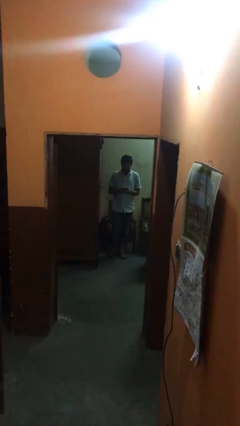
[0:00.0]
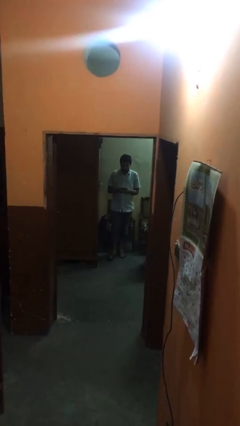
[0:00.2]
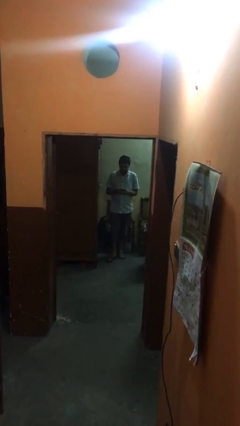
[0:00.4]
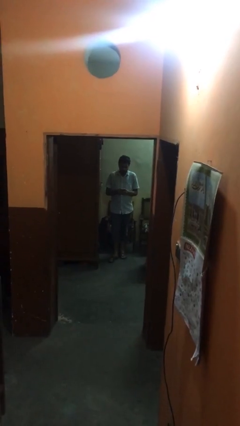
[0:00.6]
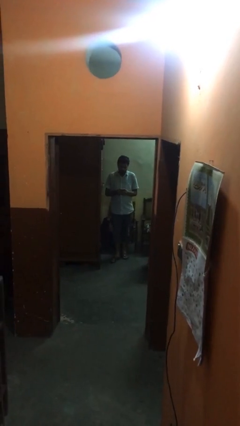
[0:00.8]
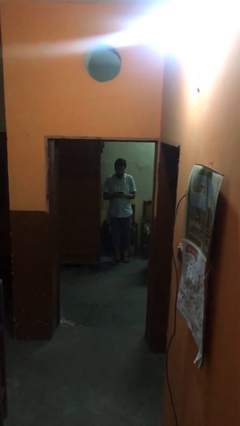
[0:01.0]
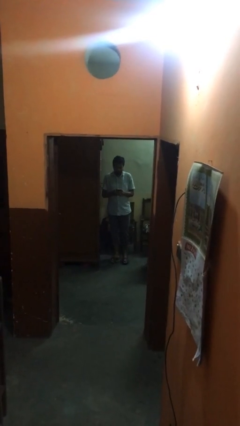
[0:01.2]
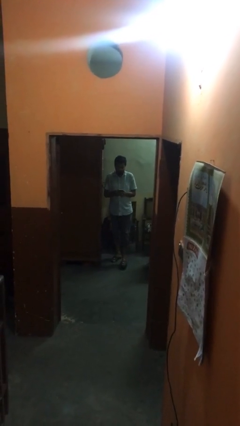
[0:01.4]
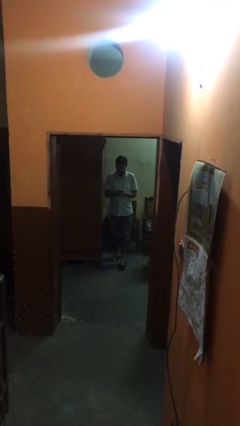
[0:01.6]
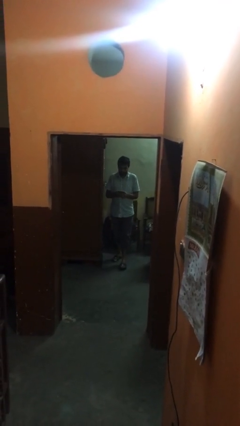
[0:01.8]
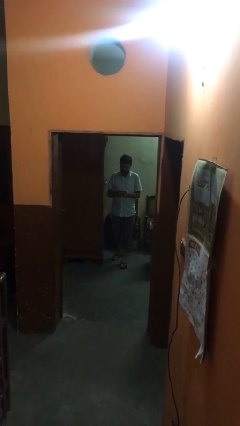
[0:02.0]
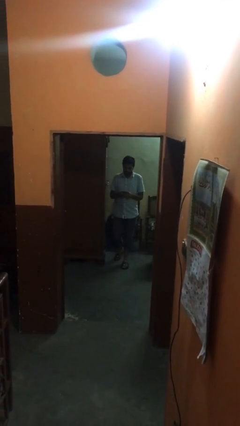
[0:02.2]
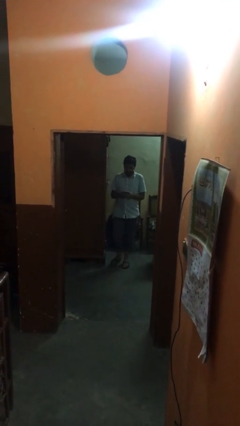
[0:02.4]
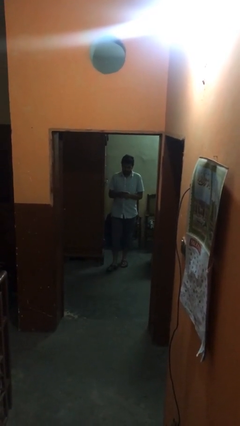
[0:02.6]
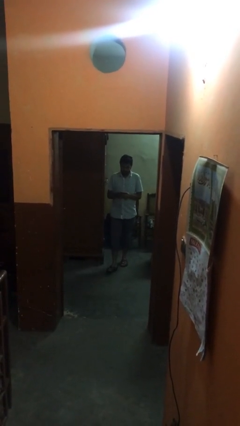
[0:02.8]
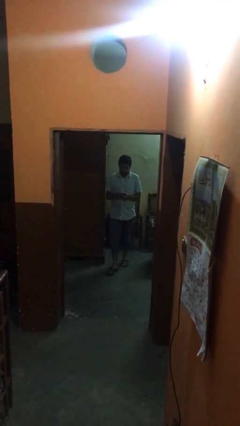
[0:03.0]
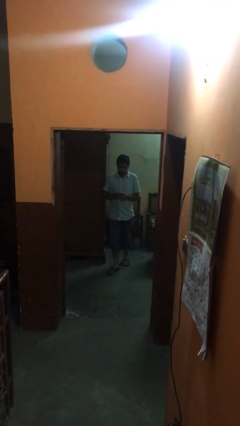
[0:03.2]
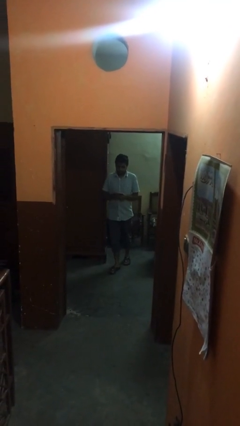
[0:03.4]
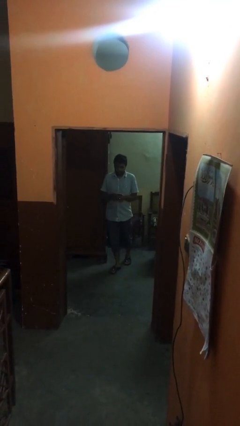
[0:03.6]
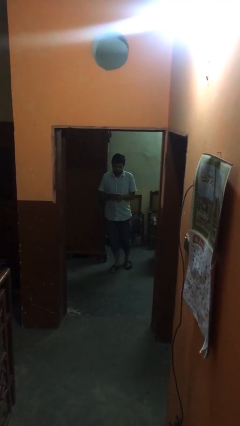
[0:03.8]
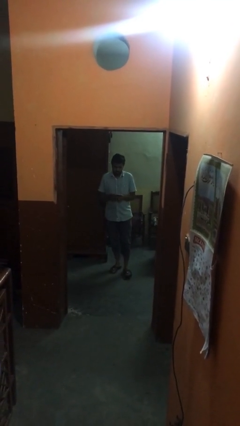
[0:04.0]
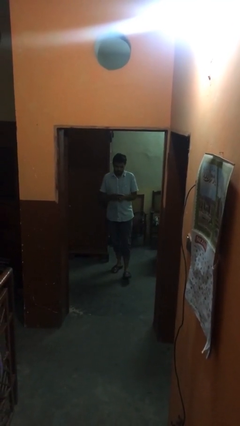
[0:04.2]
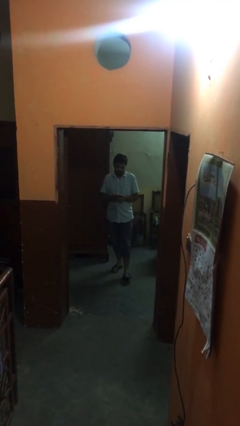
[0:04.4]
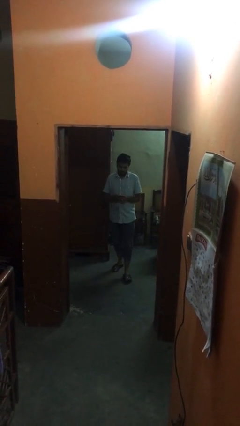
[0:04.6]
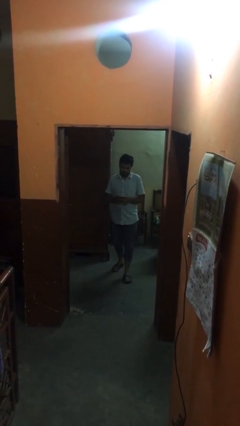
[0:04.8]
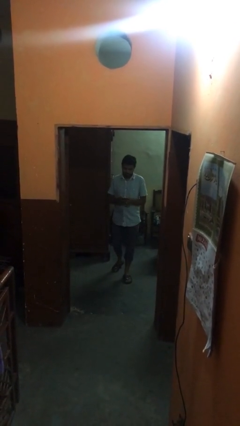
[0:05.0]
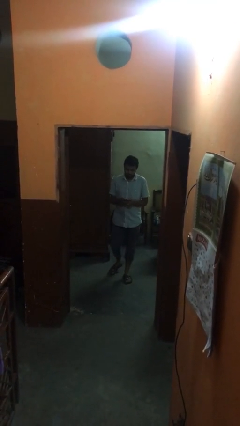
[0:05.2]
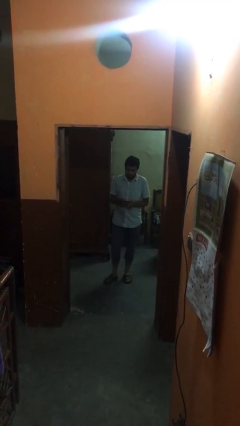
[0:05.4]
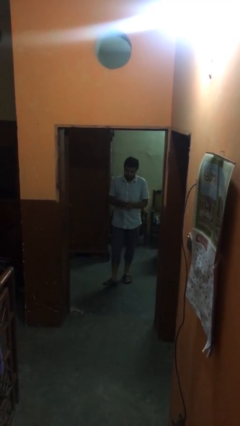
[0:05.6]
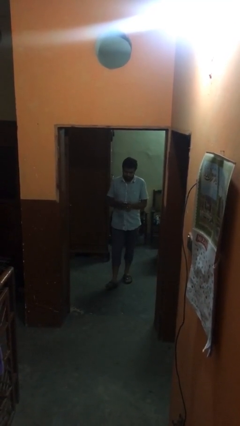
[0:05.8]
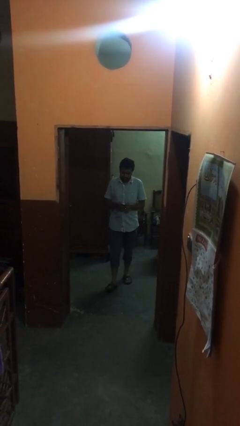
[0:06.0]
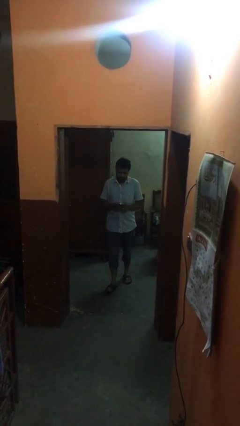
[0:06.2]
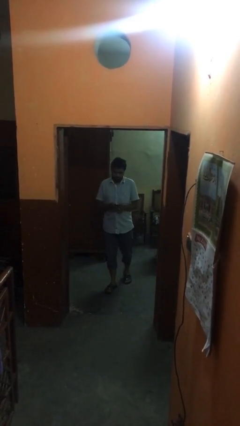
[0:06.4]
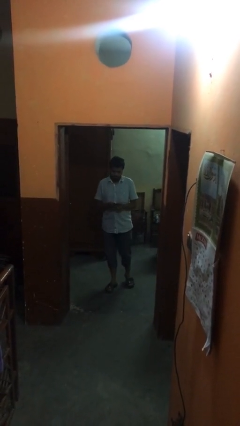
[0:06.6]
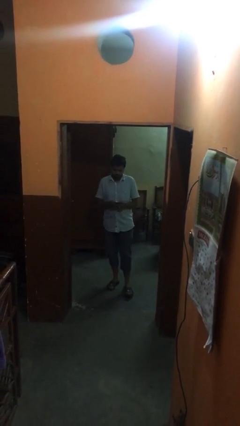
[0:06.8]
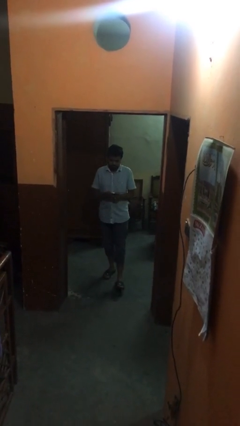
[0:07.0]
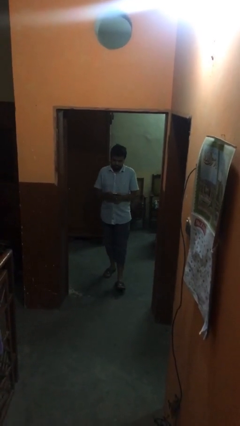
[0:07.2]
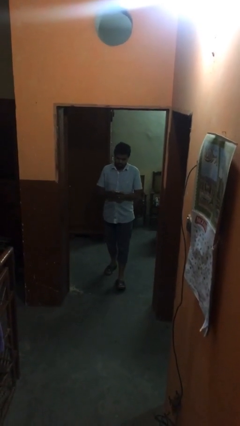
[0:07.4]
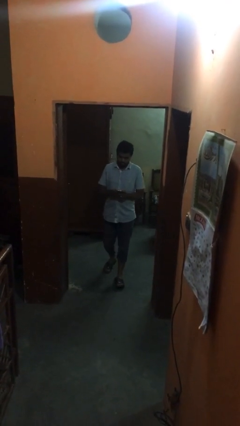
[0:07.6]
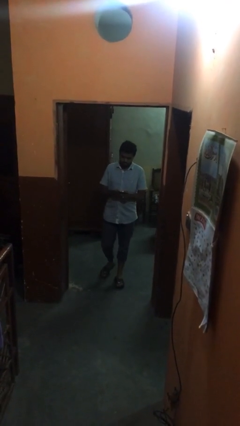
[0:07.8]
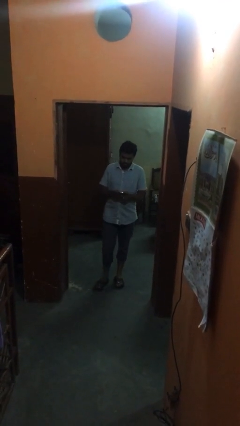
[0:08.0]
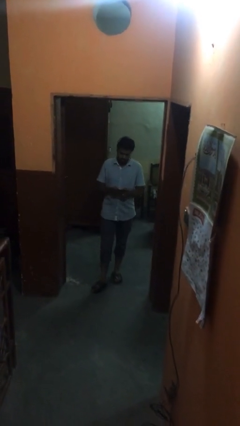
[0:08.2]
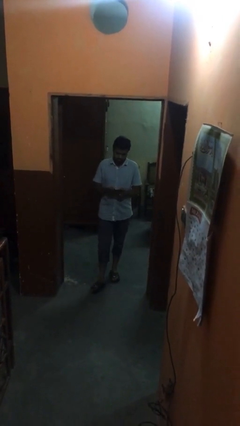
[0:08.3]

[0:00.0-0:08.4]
person texts on phone

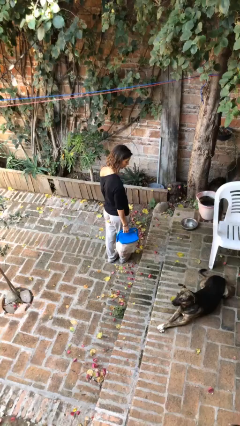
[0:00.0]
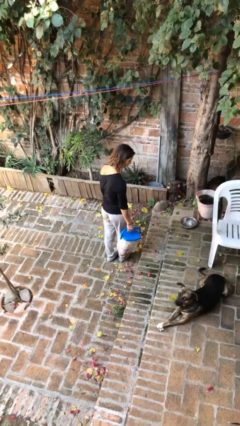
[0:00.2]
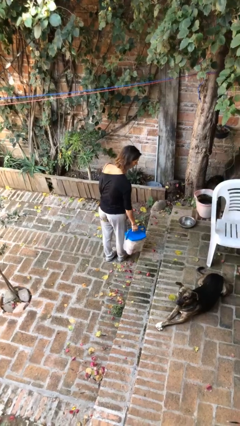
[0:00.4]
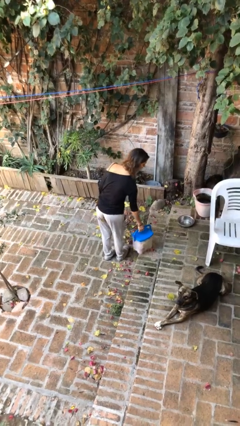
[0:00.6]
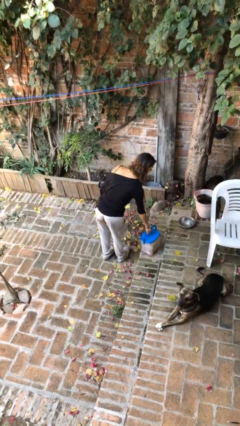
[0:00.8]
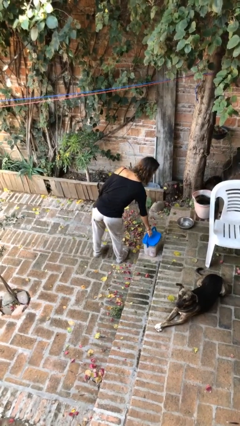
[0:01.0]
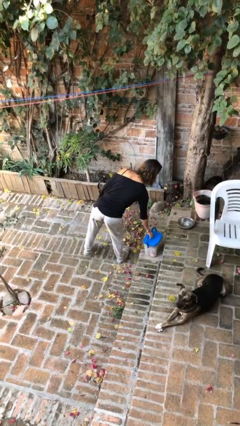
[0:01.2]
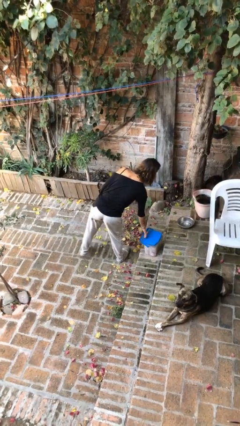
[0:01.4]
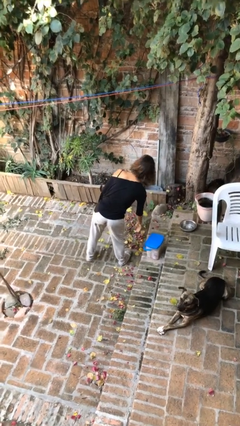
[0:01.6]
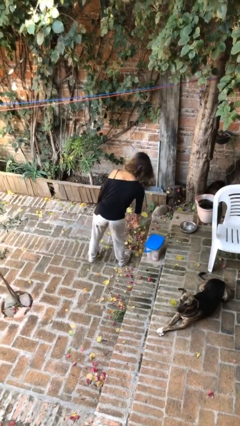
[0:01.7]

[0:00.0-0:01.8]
person puts down object on floor

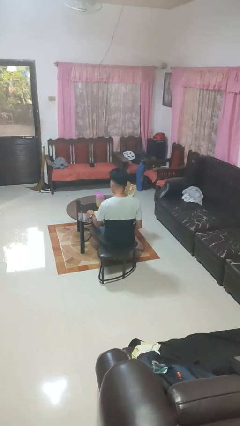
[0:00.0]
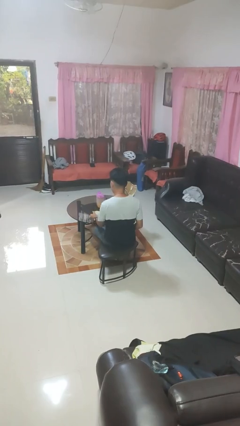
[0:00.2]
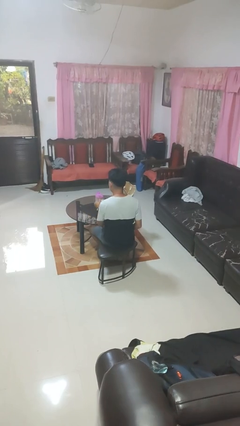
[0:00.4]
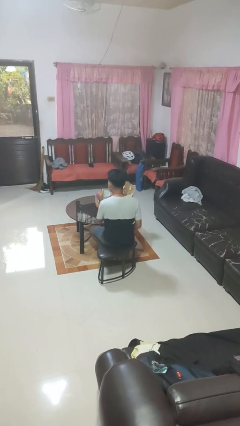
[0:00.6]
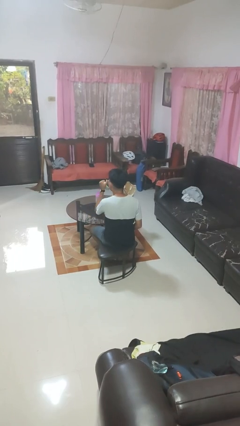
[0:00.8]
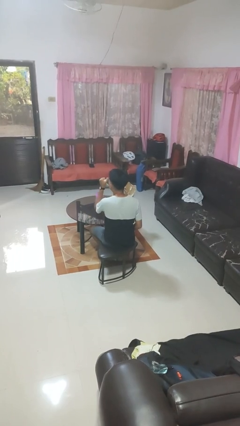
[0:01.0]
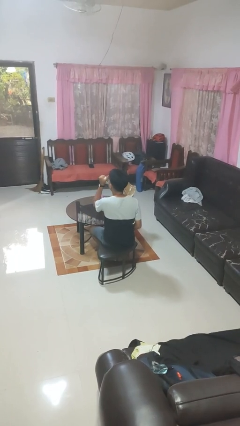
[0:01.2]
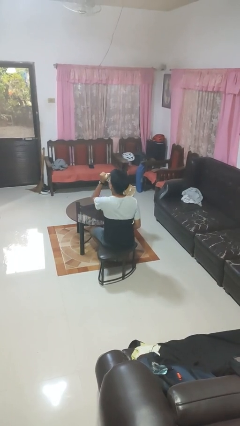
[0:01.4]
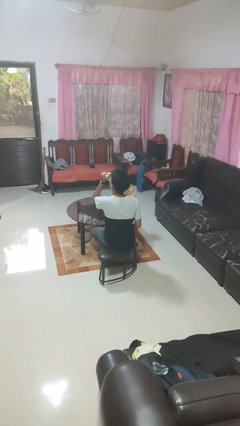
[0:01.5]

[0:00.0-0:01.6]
person drinks from mug

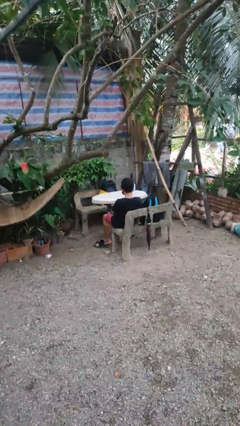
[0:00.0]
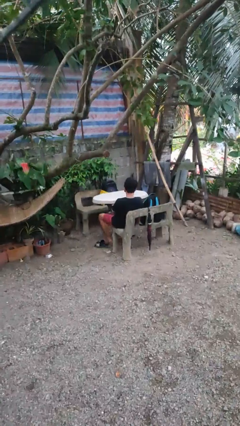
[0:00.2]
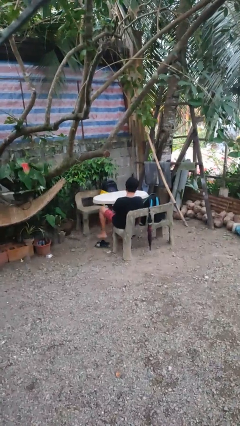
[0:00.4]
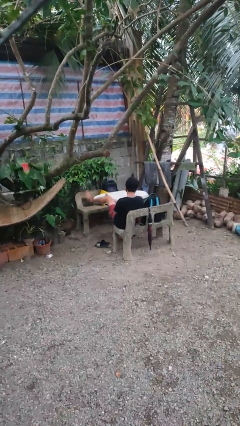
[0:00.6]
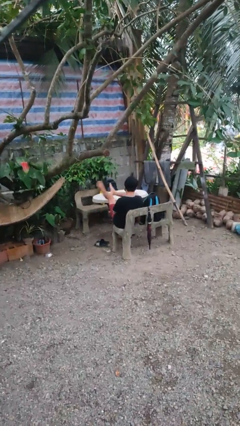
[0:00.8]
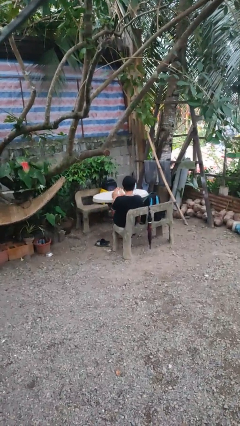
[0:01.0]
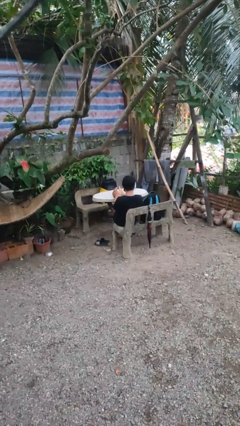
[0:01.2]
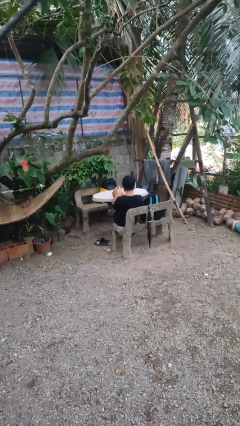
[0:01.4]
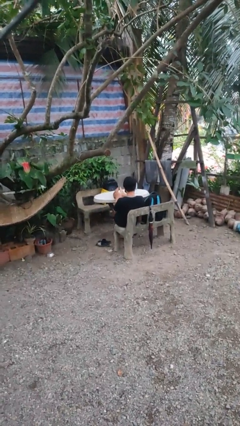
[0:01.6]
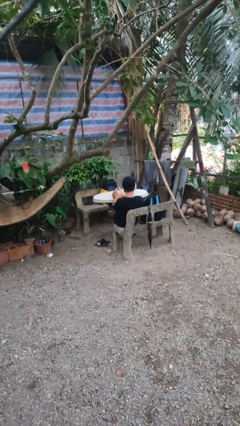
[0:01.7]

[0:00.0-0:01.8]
person puts feet up

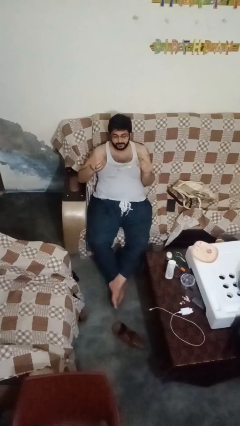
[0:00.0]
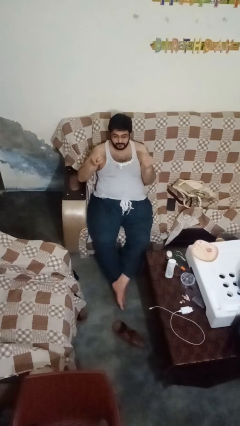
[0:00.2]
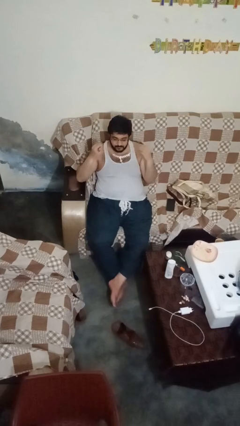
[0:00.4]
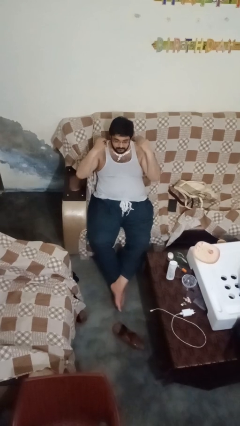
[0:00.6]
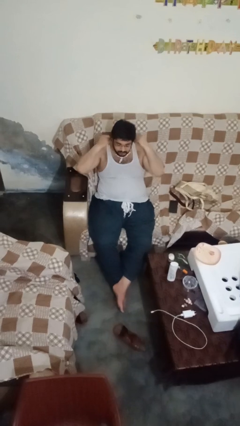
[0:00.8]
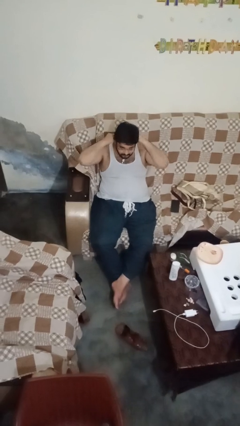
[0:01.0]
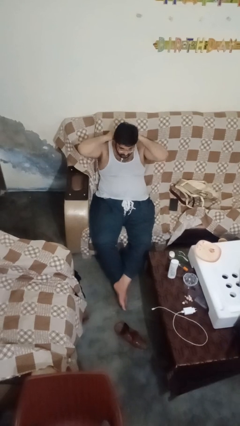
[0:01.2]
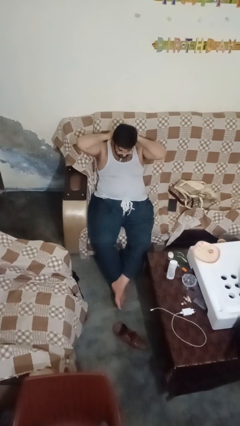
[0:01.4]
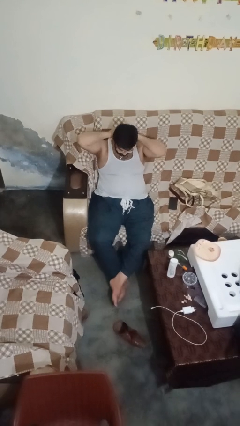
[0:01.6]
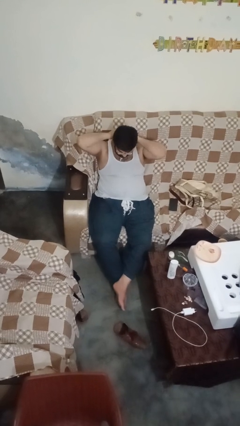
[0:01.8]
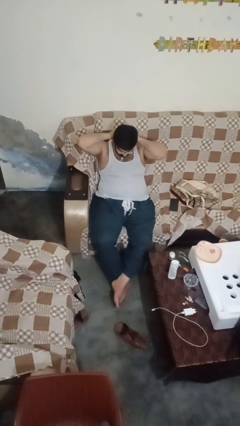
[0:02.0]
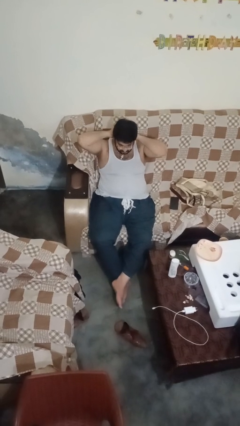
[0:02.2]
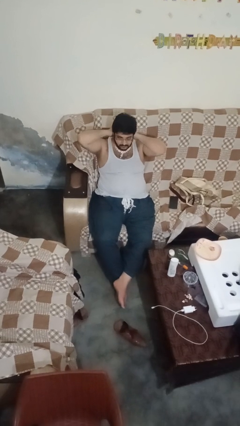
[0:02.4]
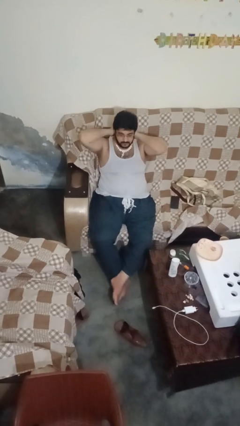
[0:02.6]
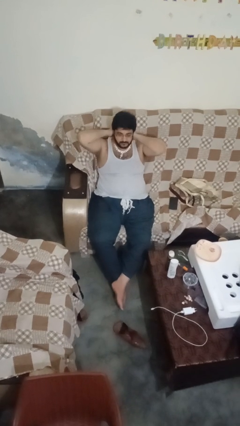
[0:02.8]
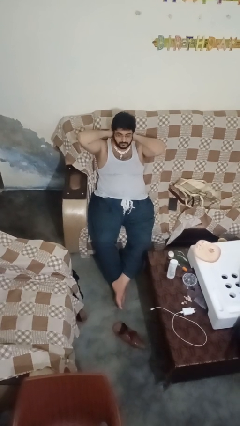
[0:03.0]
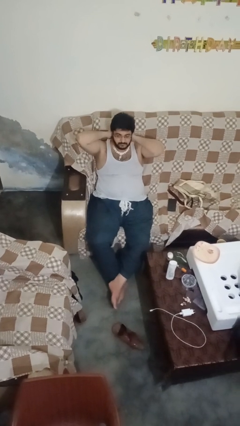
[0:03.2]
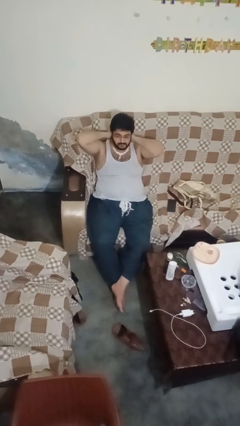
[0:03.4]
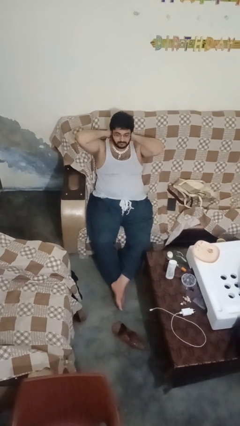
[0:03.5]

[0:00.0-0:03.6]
person puts on necklace
